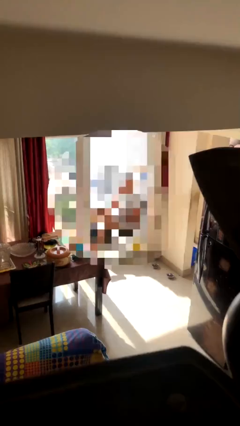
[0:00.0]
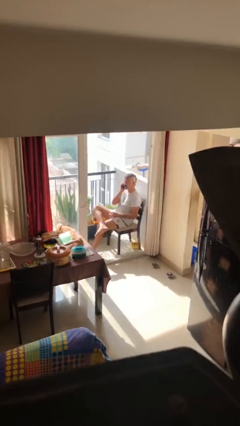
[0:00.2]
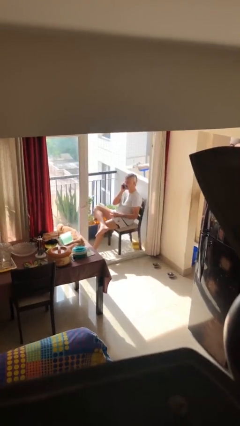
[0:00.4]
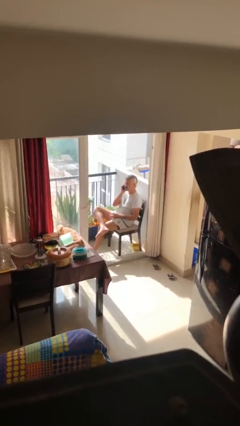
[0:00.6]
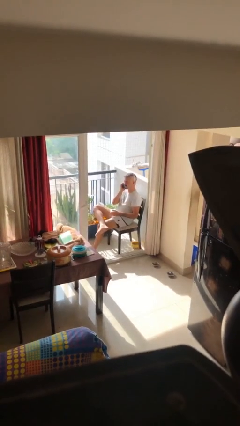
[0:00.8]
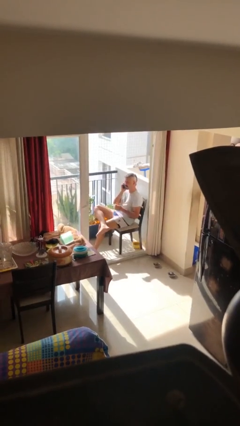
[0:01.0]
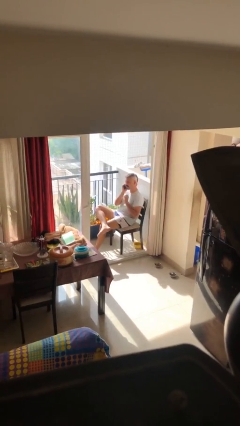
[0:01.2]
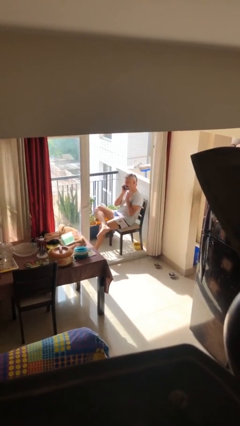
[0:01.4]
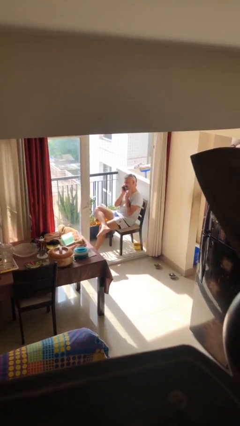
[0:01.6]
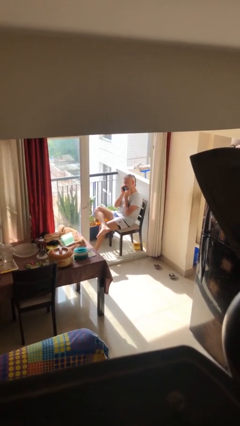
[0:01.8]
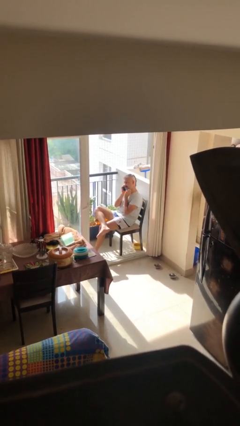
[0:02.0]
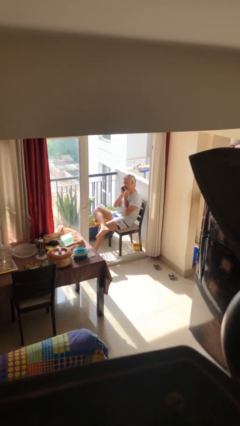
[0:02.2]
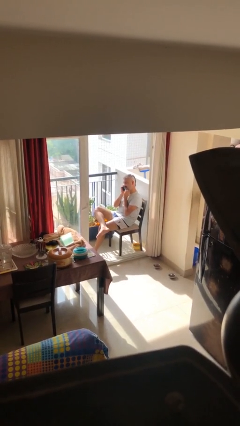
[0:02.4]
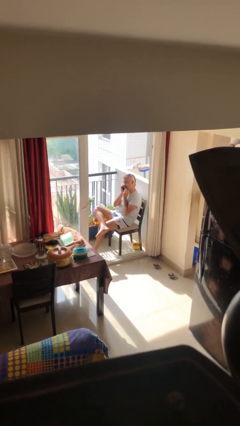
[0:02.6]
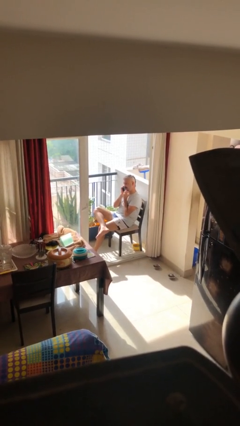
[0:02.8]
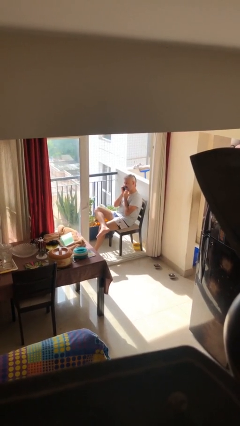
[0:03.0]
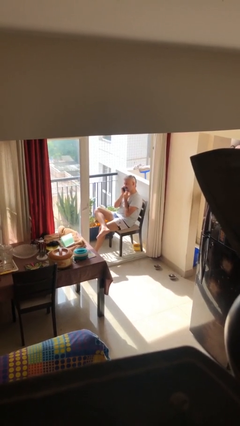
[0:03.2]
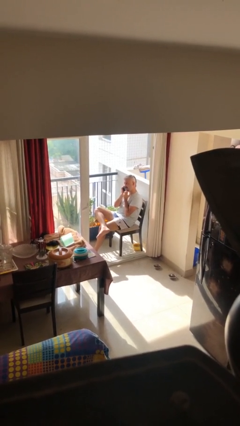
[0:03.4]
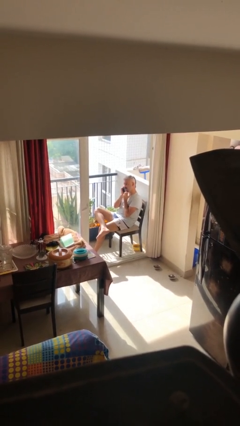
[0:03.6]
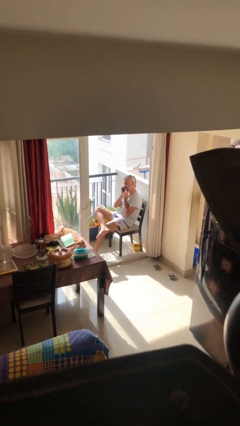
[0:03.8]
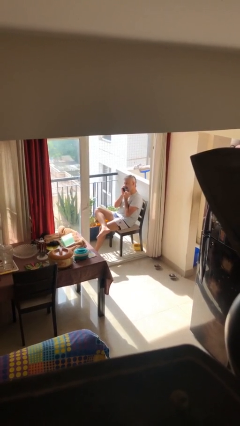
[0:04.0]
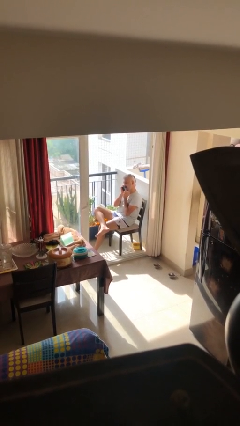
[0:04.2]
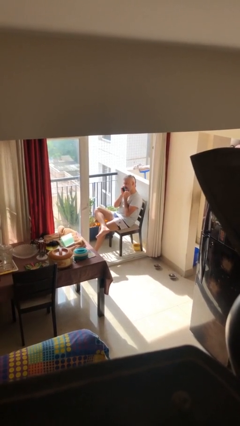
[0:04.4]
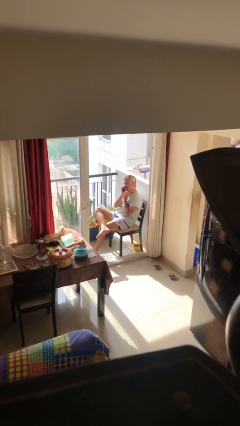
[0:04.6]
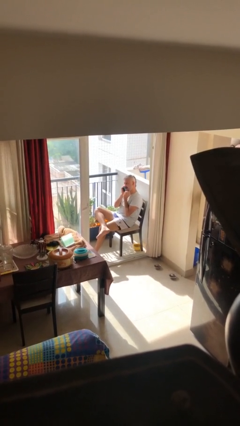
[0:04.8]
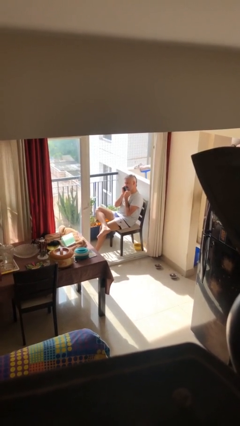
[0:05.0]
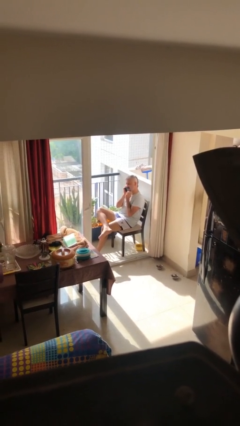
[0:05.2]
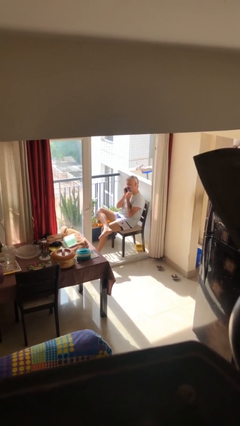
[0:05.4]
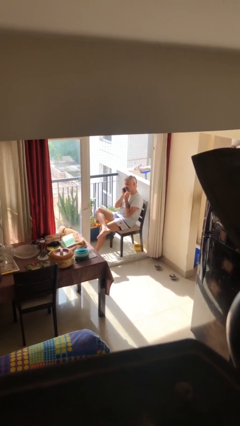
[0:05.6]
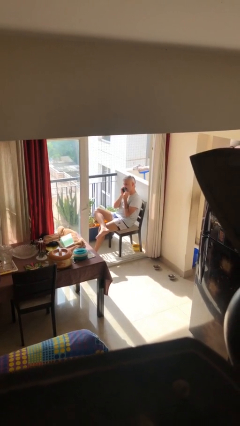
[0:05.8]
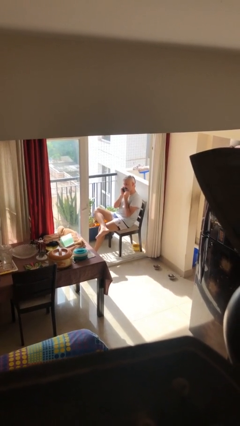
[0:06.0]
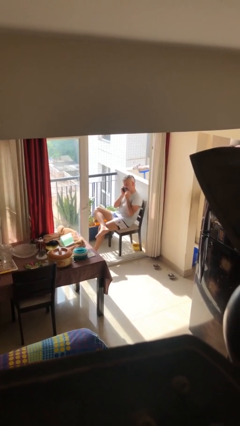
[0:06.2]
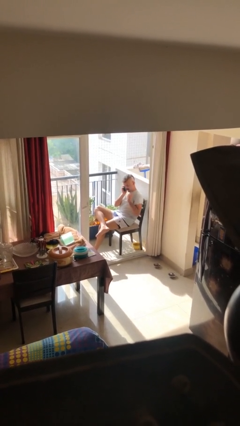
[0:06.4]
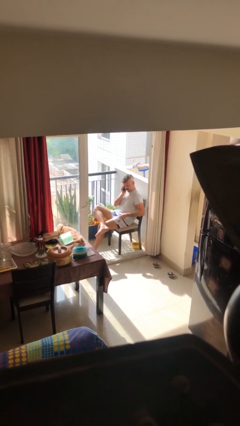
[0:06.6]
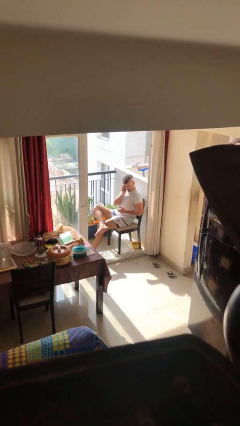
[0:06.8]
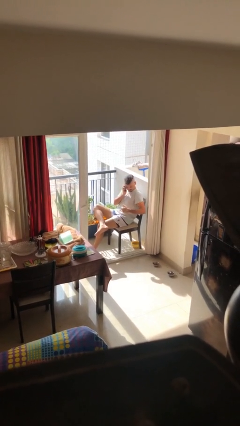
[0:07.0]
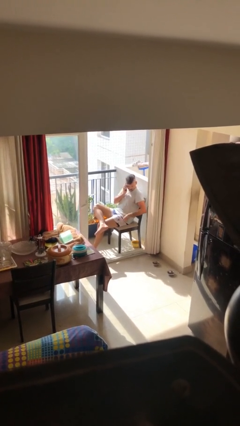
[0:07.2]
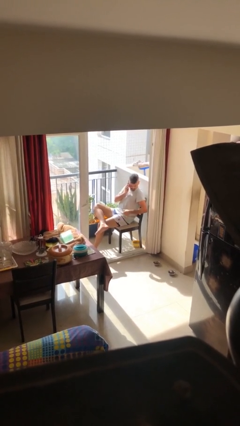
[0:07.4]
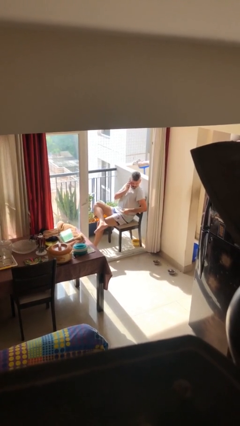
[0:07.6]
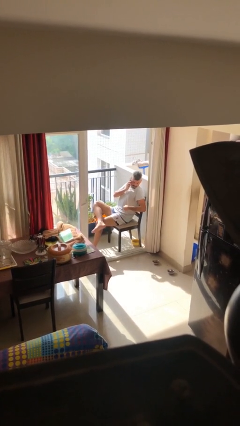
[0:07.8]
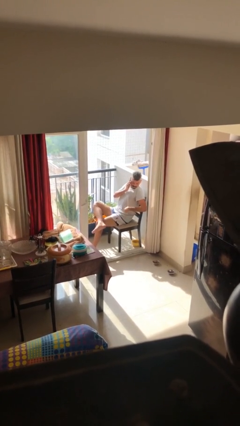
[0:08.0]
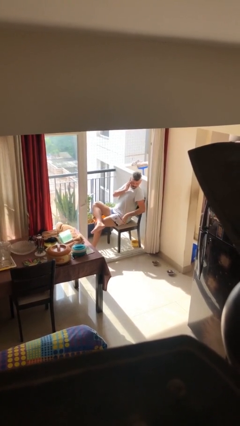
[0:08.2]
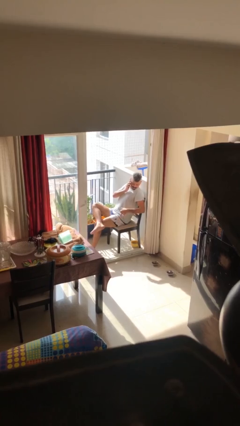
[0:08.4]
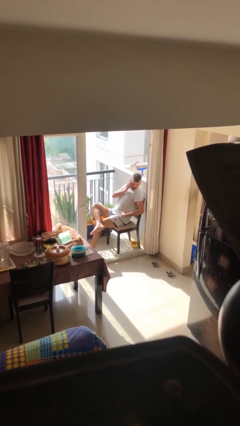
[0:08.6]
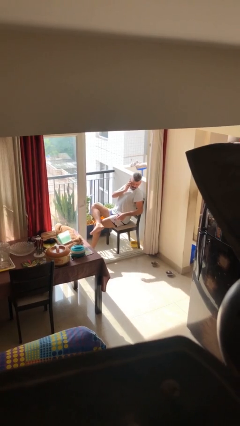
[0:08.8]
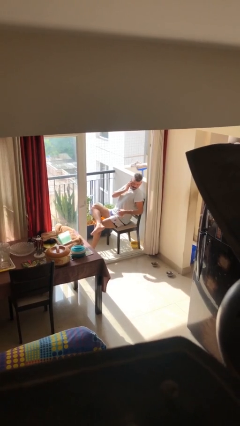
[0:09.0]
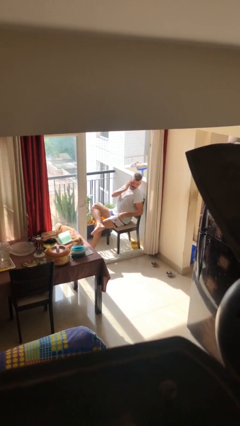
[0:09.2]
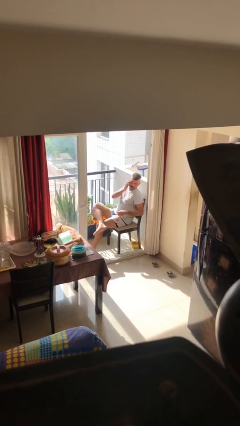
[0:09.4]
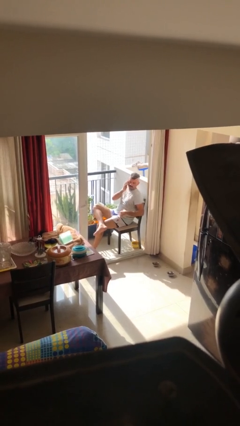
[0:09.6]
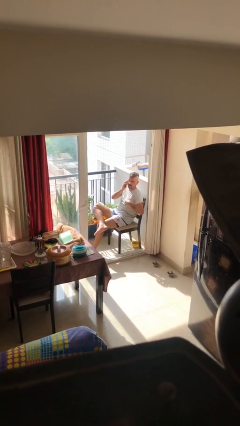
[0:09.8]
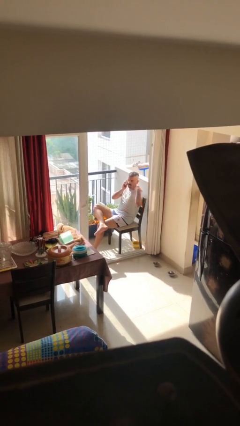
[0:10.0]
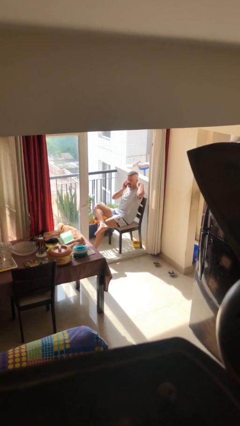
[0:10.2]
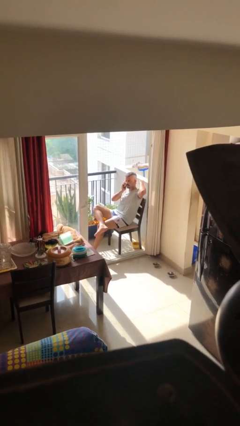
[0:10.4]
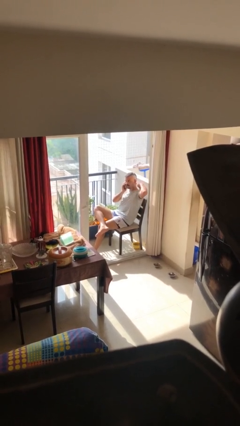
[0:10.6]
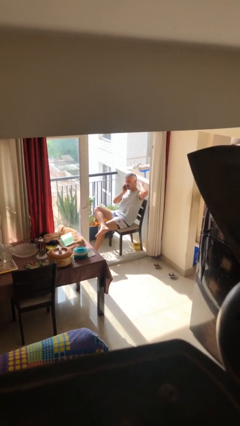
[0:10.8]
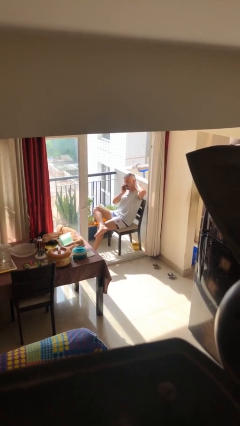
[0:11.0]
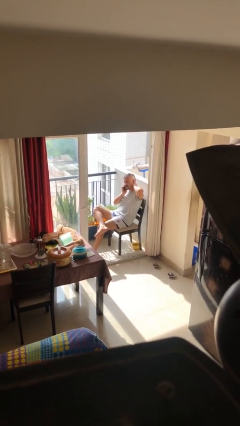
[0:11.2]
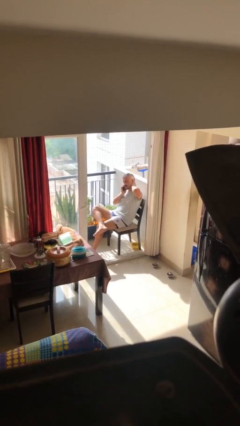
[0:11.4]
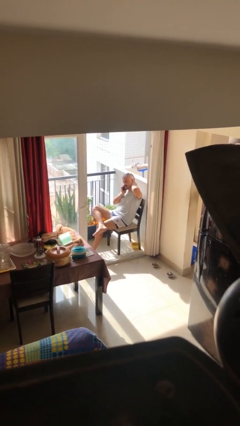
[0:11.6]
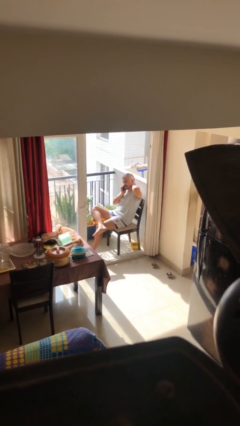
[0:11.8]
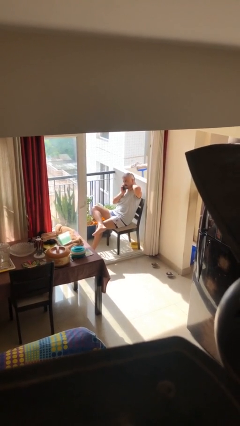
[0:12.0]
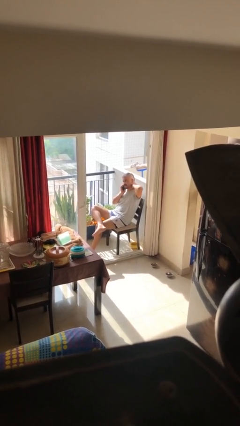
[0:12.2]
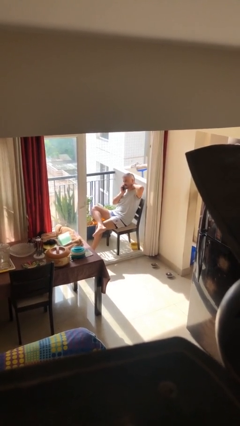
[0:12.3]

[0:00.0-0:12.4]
person talks on phone

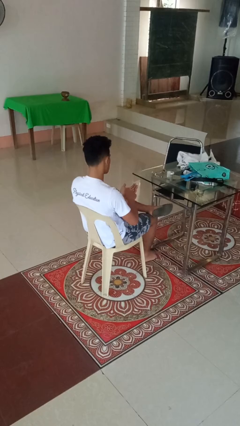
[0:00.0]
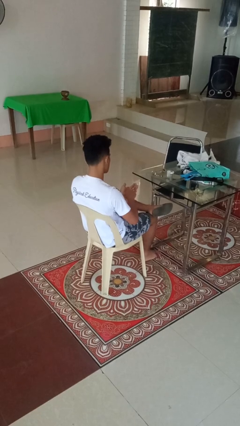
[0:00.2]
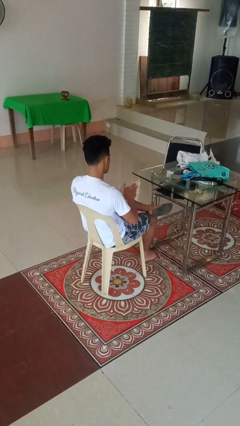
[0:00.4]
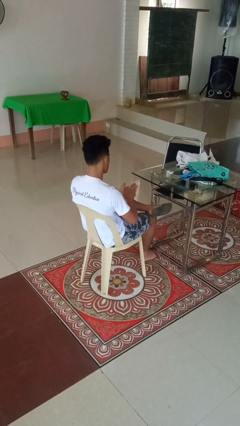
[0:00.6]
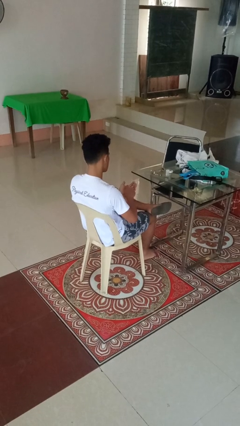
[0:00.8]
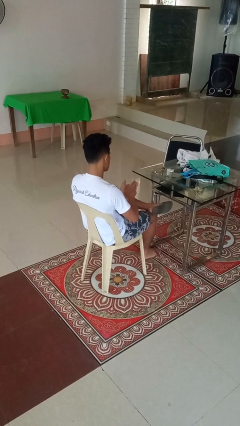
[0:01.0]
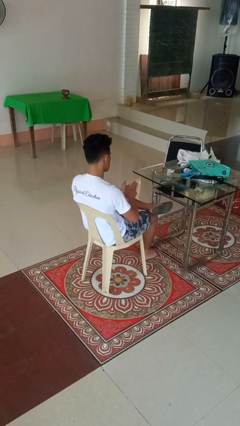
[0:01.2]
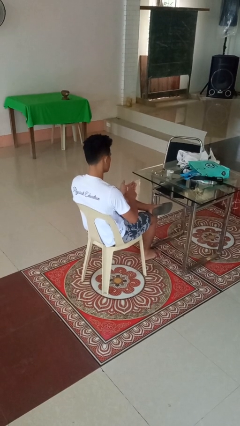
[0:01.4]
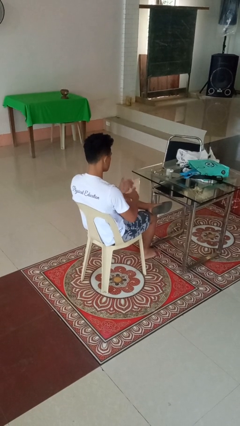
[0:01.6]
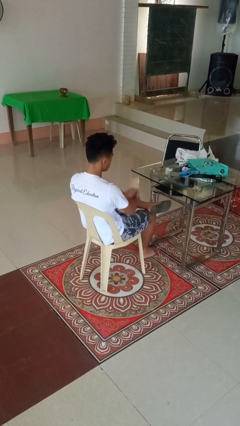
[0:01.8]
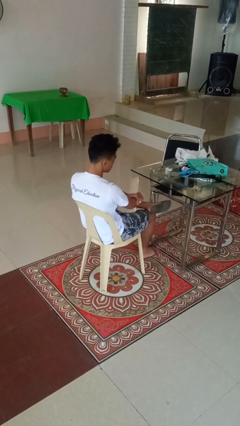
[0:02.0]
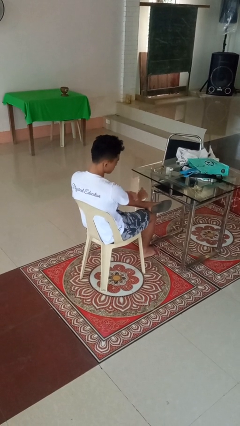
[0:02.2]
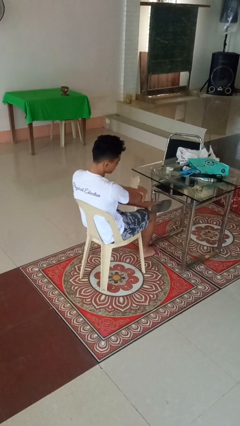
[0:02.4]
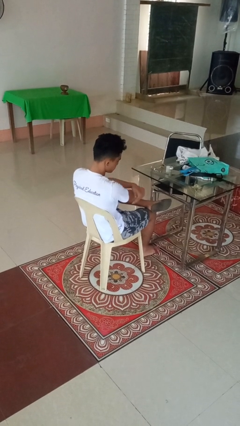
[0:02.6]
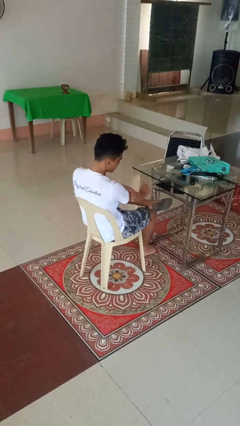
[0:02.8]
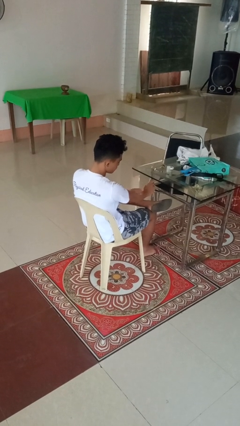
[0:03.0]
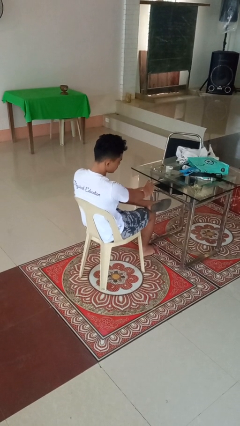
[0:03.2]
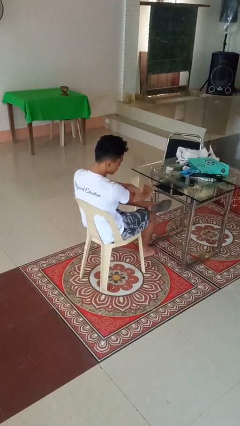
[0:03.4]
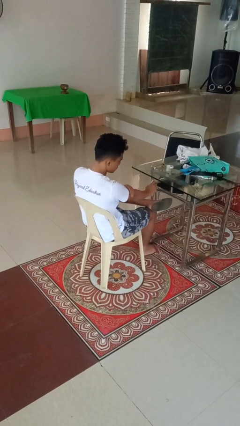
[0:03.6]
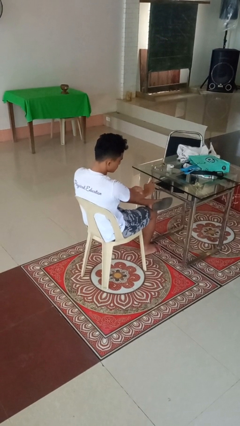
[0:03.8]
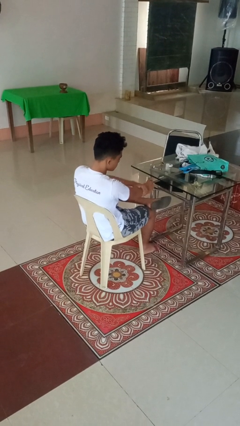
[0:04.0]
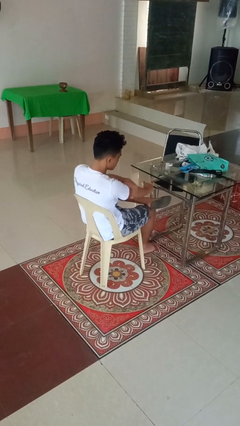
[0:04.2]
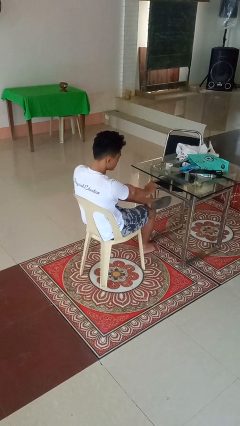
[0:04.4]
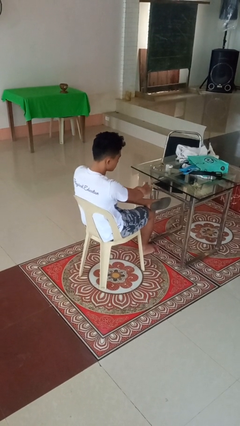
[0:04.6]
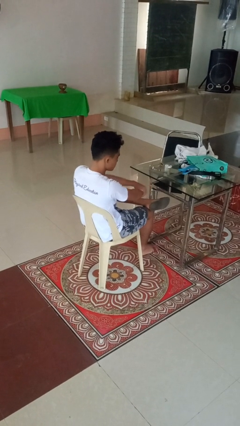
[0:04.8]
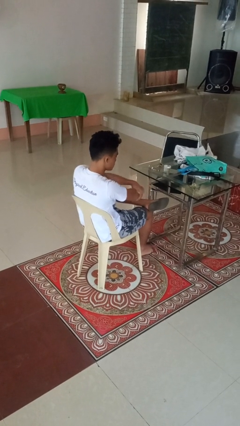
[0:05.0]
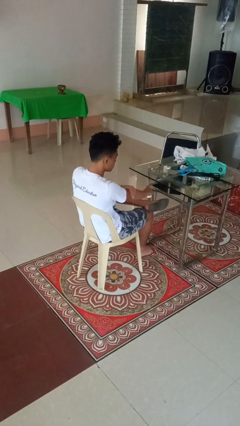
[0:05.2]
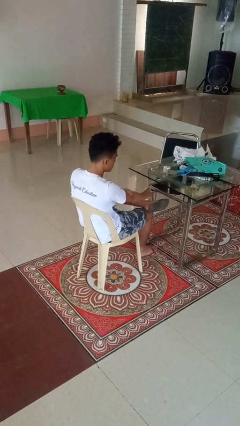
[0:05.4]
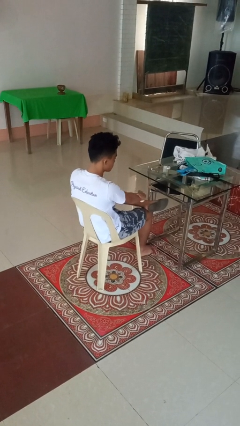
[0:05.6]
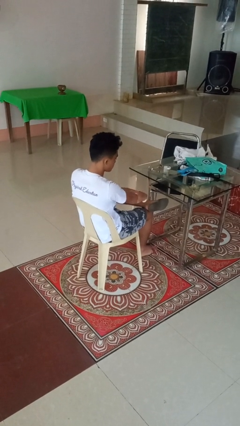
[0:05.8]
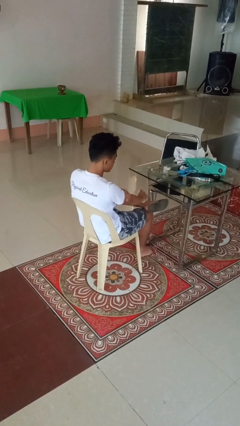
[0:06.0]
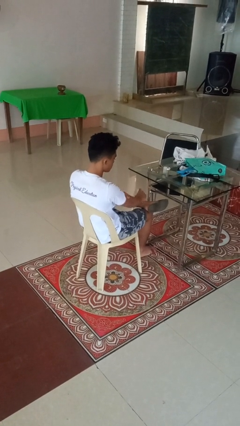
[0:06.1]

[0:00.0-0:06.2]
person applies sunscreen
